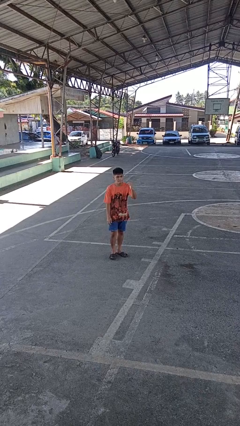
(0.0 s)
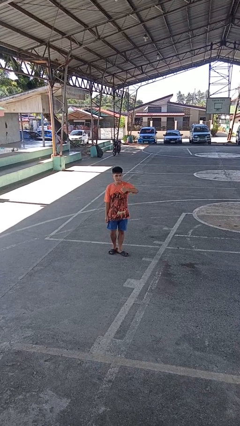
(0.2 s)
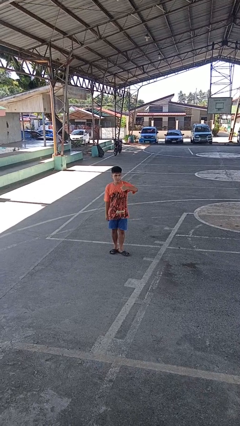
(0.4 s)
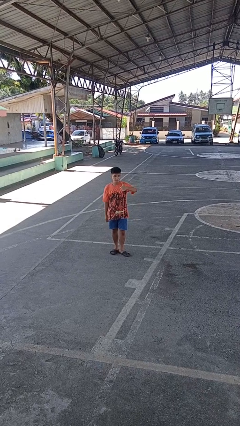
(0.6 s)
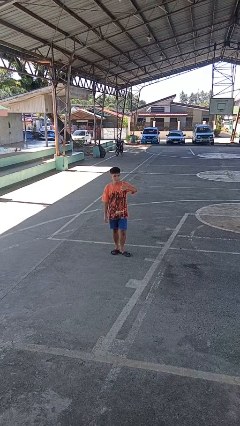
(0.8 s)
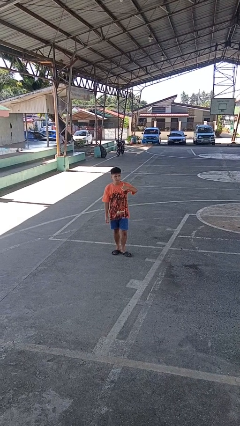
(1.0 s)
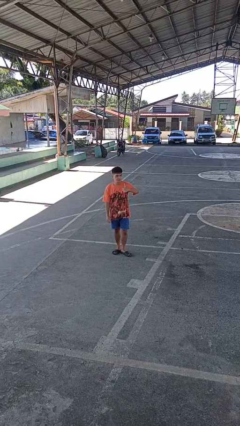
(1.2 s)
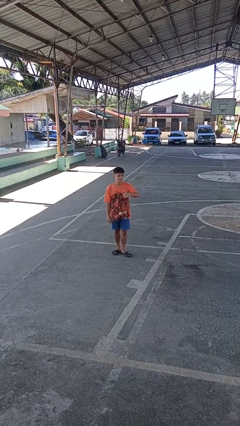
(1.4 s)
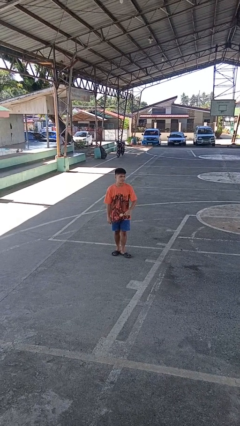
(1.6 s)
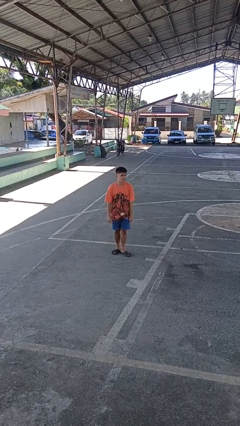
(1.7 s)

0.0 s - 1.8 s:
person gestures thumbs up

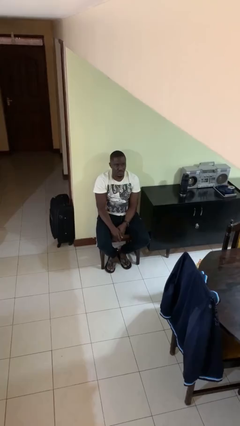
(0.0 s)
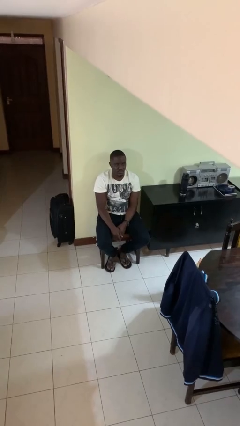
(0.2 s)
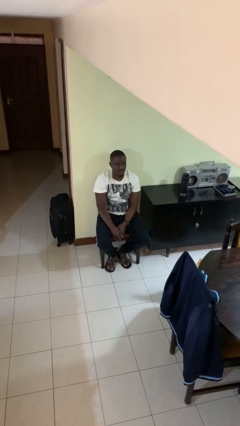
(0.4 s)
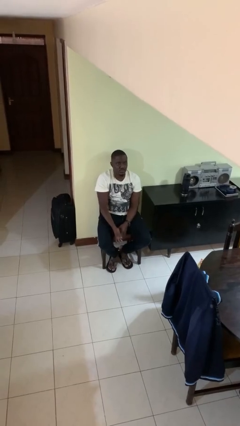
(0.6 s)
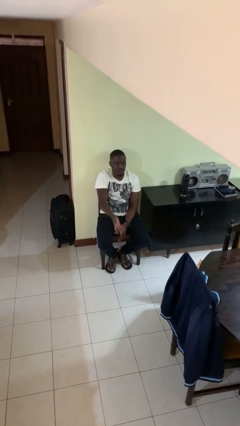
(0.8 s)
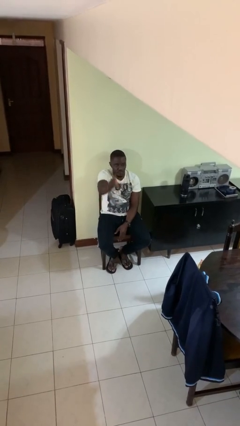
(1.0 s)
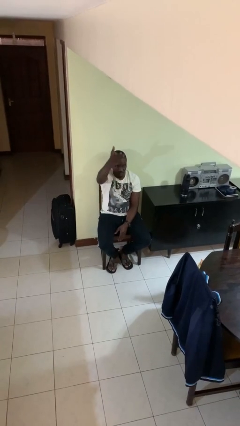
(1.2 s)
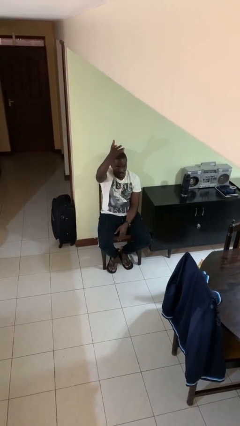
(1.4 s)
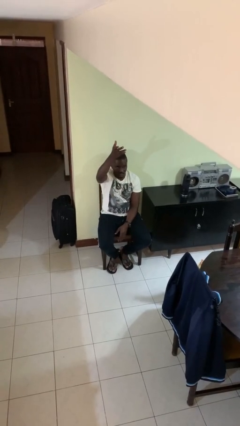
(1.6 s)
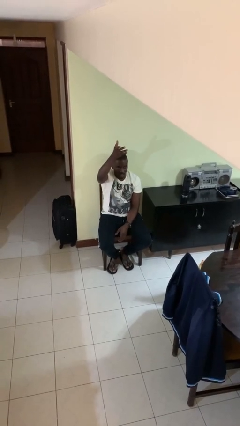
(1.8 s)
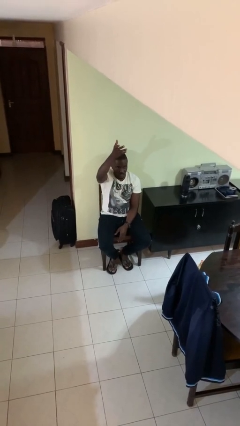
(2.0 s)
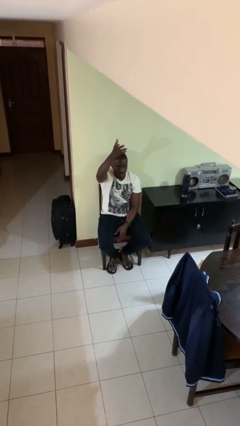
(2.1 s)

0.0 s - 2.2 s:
person gestures swipe up

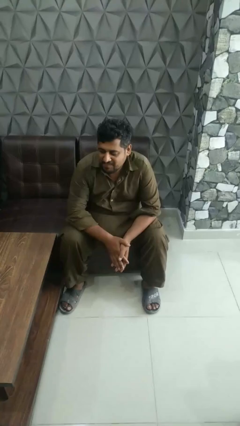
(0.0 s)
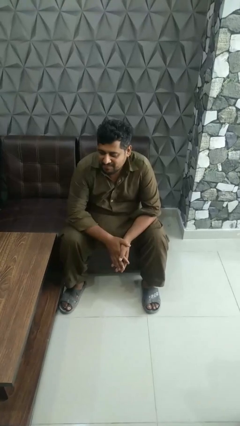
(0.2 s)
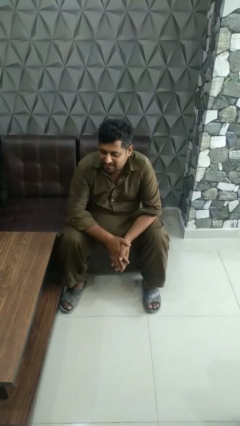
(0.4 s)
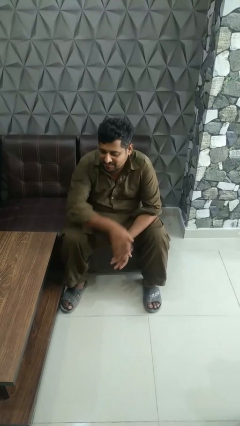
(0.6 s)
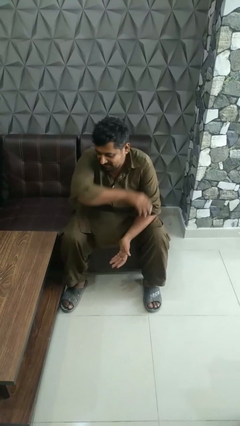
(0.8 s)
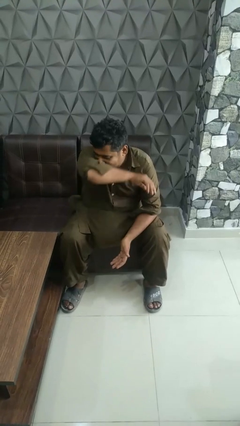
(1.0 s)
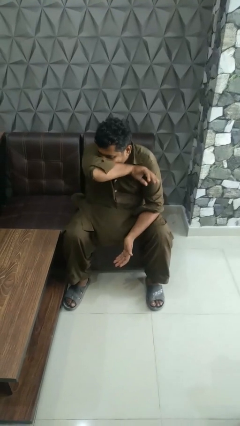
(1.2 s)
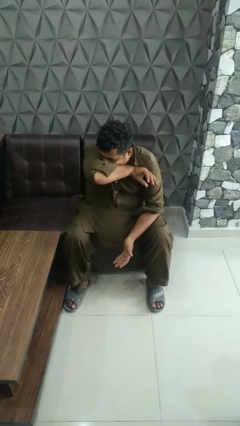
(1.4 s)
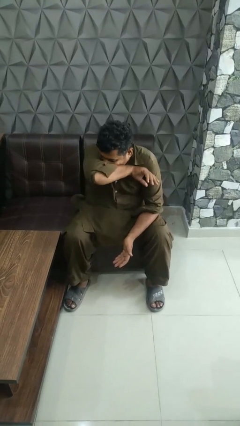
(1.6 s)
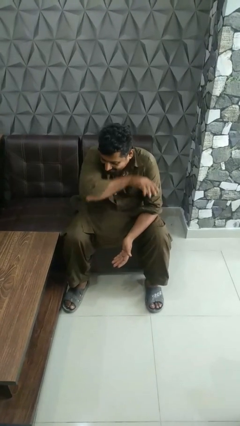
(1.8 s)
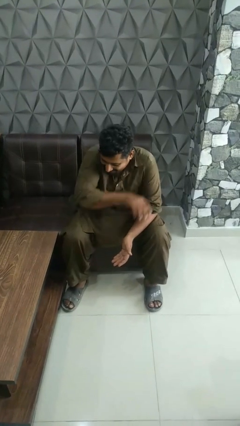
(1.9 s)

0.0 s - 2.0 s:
person sneezes into arm

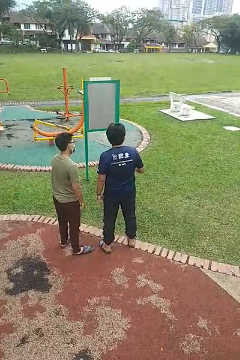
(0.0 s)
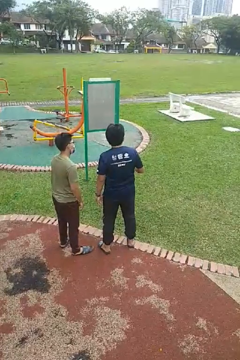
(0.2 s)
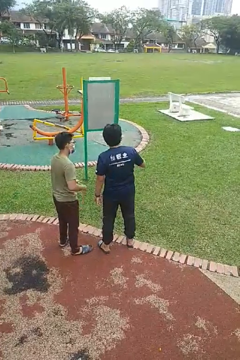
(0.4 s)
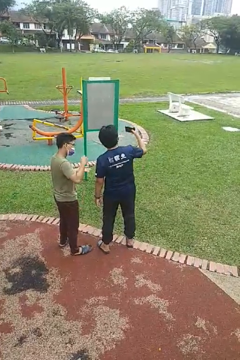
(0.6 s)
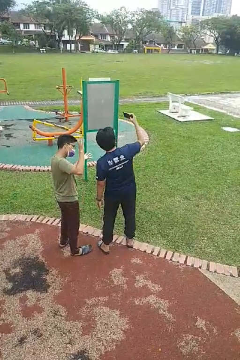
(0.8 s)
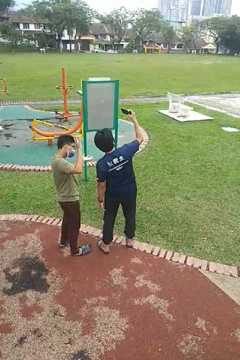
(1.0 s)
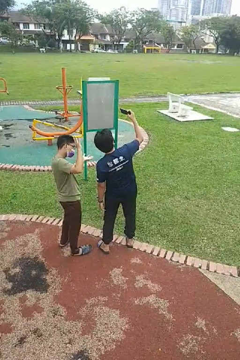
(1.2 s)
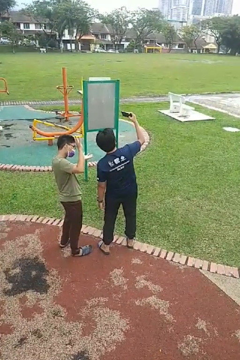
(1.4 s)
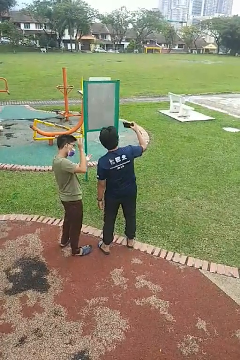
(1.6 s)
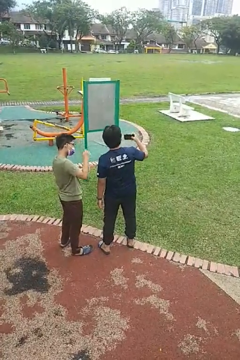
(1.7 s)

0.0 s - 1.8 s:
person takes selfie with person

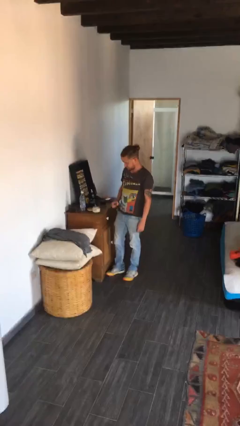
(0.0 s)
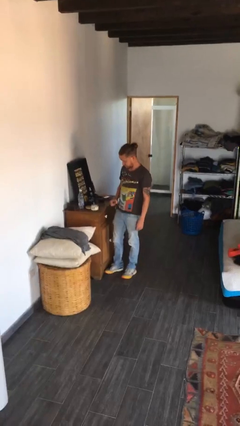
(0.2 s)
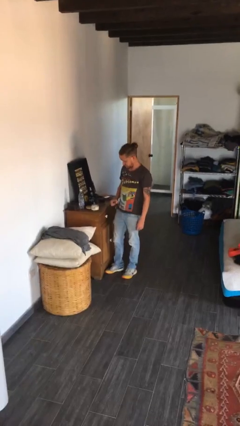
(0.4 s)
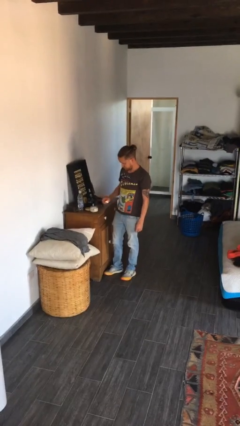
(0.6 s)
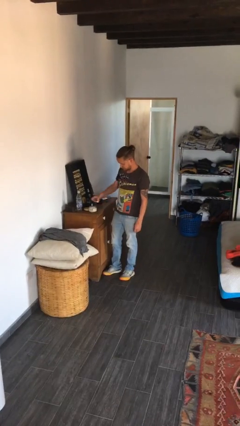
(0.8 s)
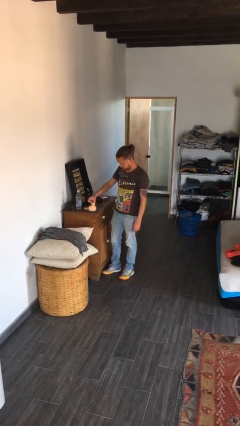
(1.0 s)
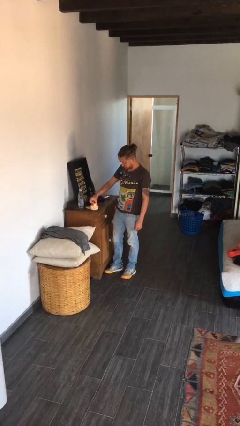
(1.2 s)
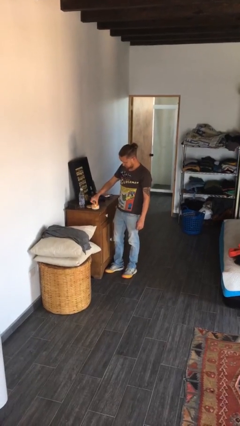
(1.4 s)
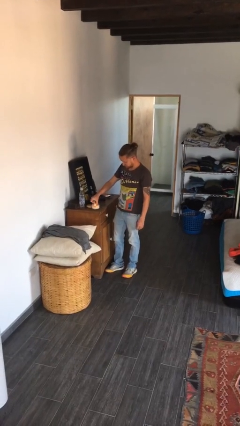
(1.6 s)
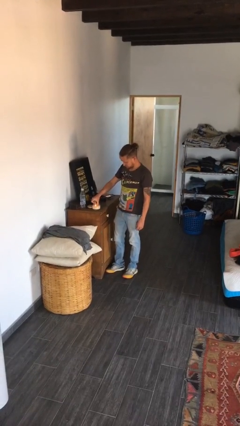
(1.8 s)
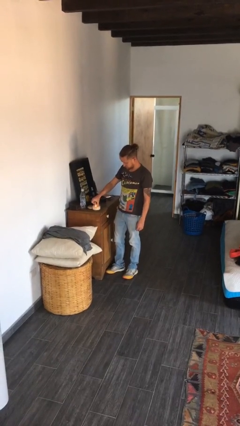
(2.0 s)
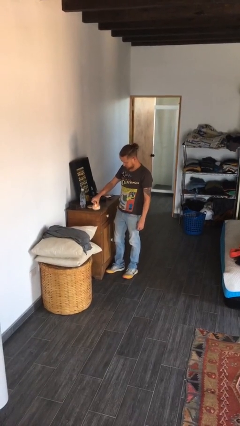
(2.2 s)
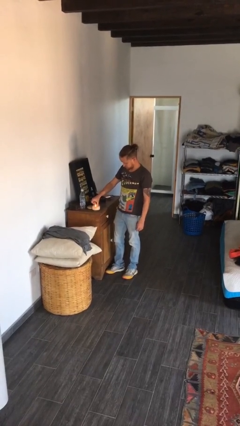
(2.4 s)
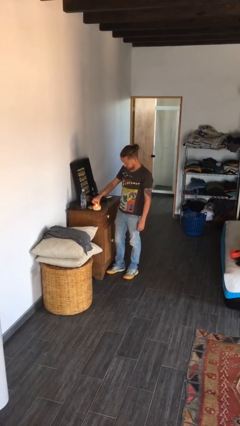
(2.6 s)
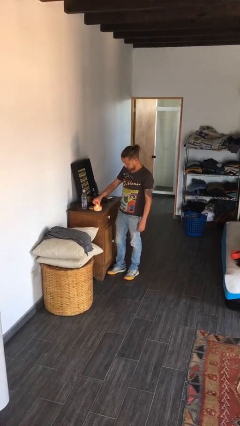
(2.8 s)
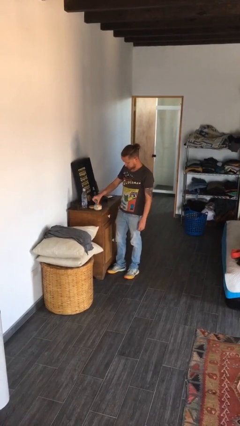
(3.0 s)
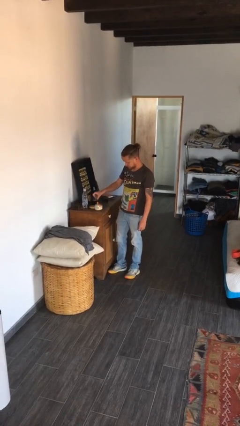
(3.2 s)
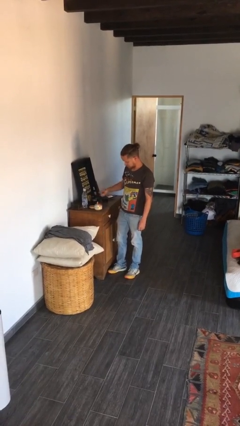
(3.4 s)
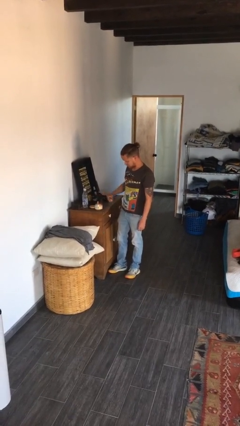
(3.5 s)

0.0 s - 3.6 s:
person lights candle

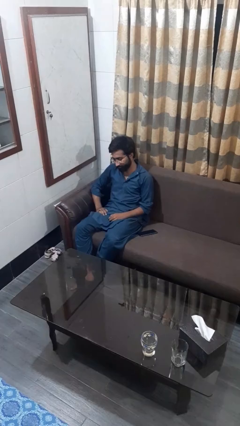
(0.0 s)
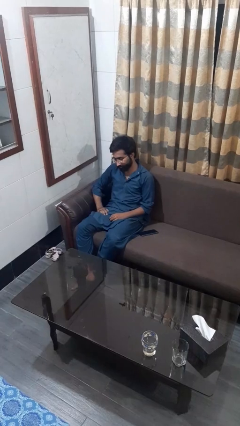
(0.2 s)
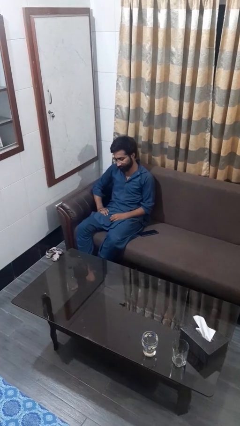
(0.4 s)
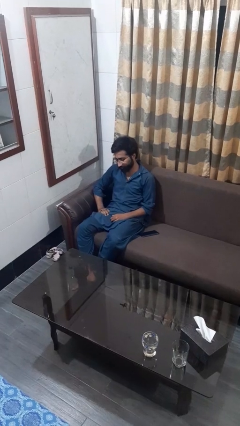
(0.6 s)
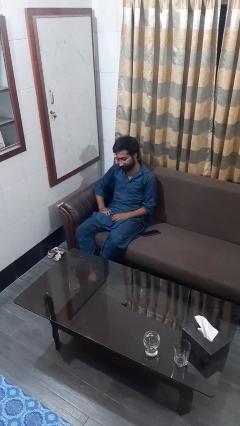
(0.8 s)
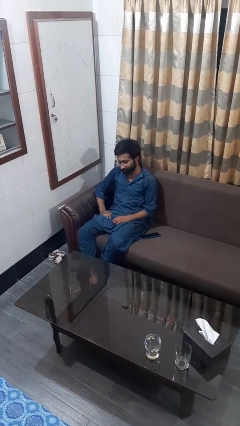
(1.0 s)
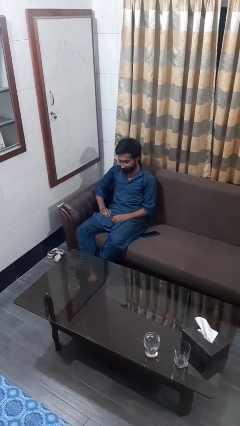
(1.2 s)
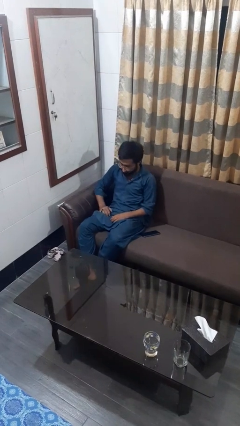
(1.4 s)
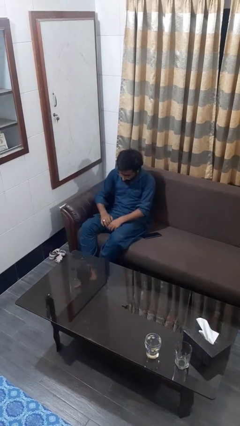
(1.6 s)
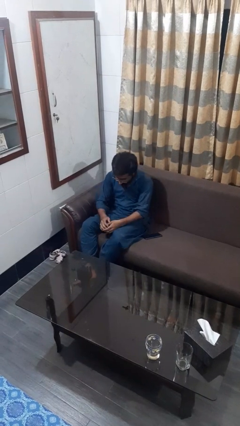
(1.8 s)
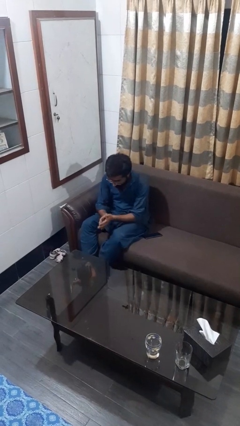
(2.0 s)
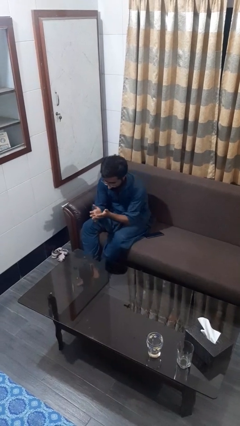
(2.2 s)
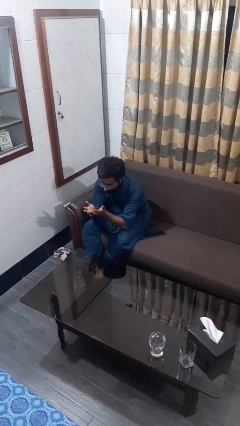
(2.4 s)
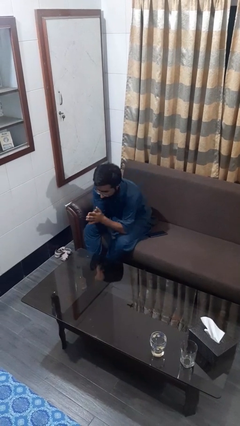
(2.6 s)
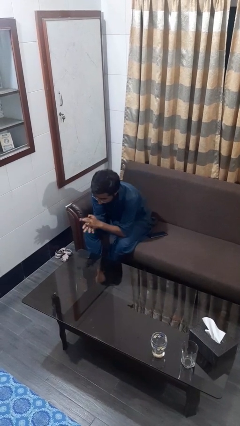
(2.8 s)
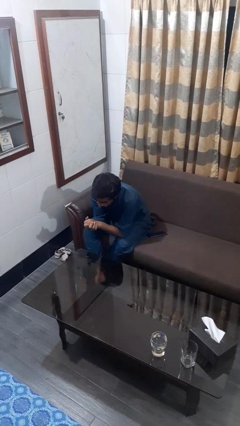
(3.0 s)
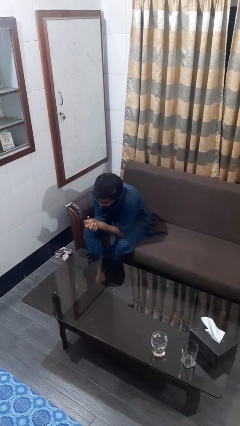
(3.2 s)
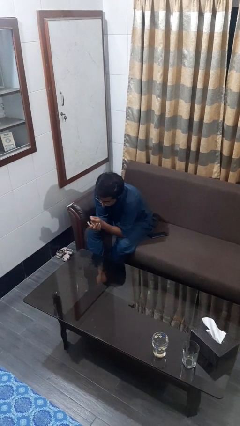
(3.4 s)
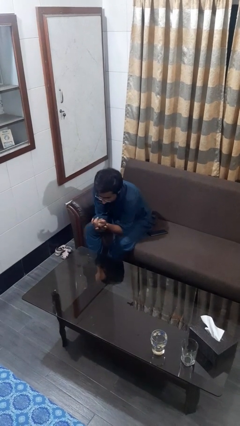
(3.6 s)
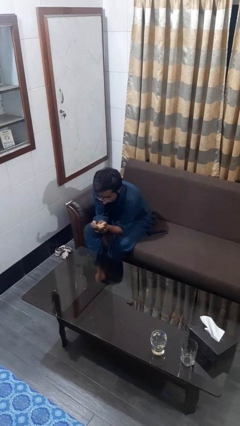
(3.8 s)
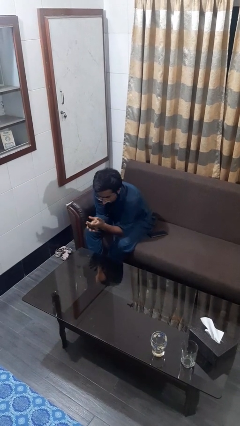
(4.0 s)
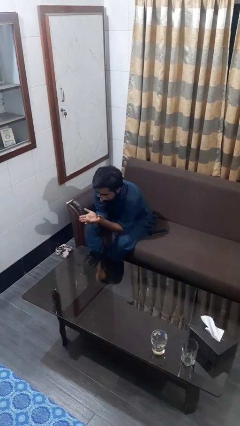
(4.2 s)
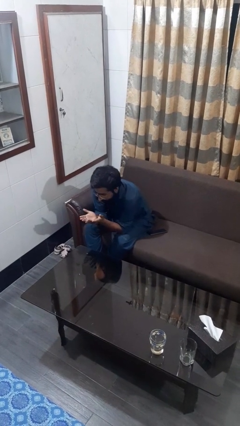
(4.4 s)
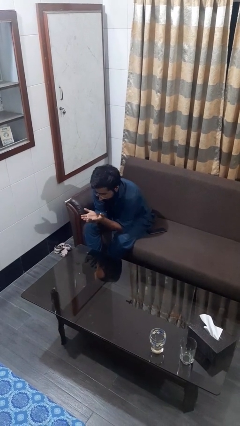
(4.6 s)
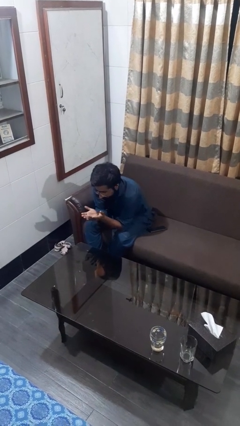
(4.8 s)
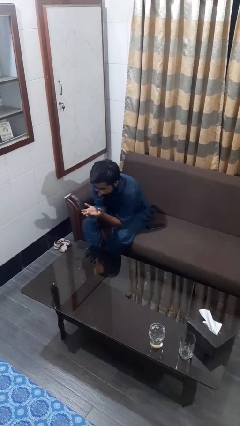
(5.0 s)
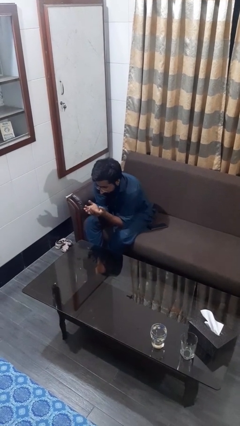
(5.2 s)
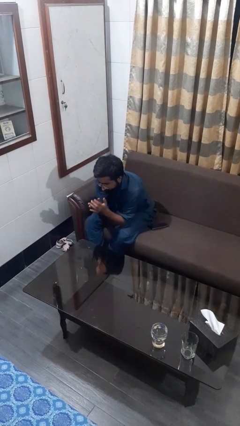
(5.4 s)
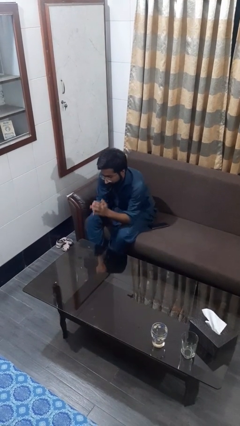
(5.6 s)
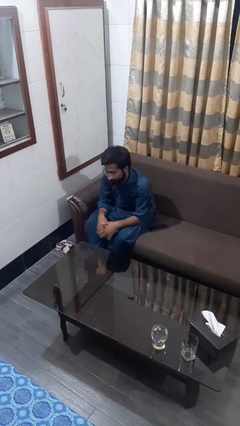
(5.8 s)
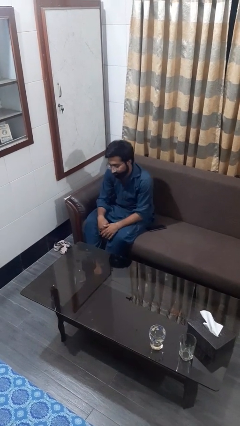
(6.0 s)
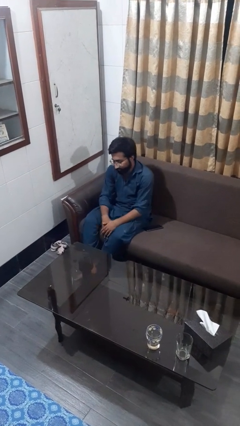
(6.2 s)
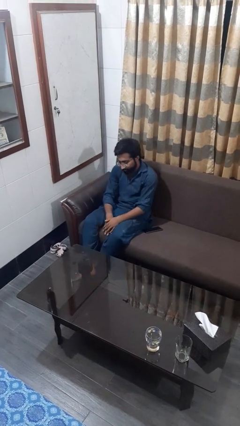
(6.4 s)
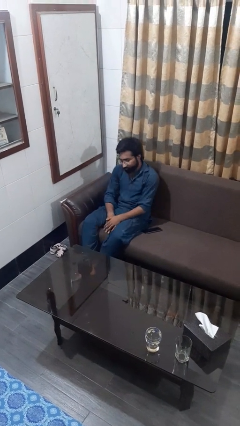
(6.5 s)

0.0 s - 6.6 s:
person looks at hands in lap
